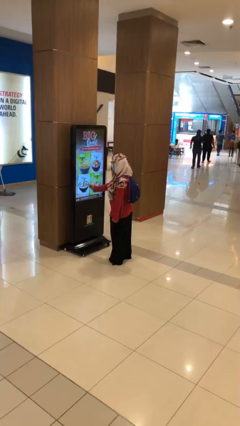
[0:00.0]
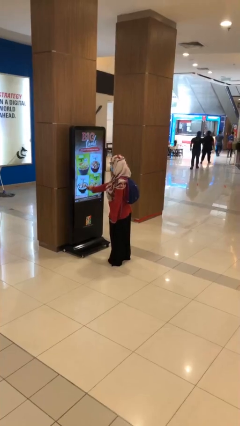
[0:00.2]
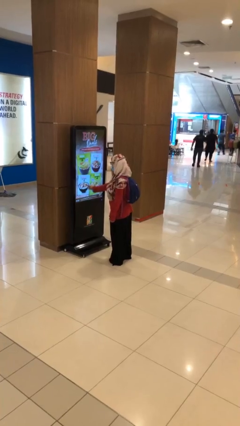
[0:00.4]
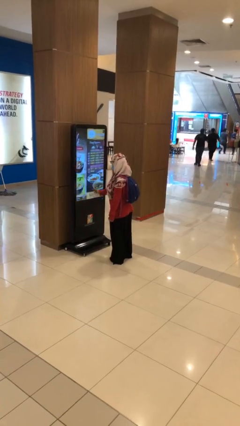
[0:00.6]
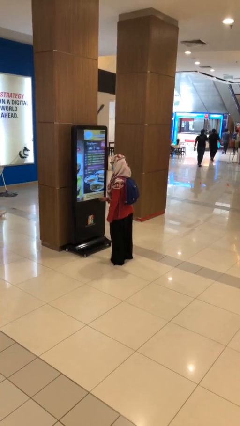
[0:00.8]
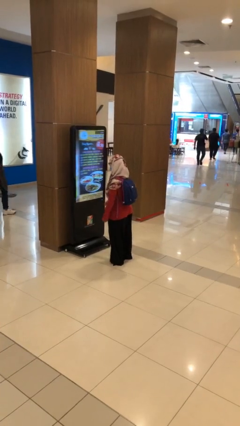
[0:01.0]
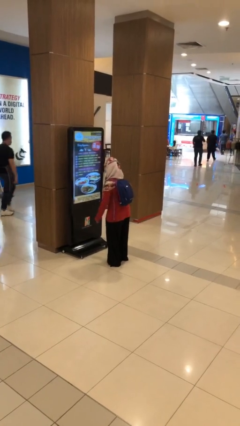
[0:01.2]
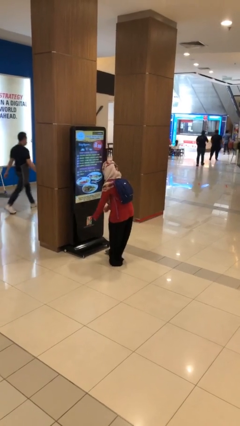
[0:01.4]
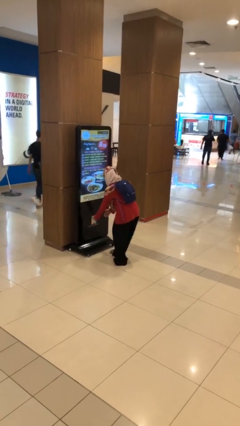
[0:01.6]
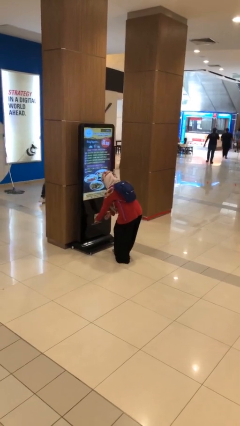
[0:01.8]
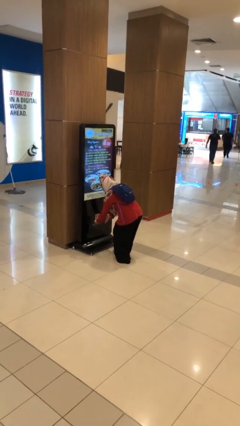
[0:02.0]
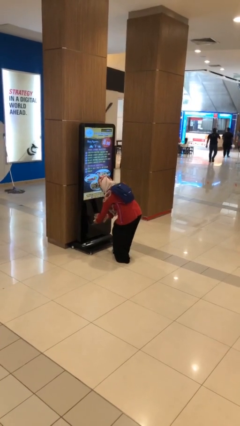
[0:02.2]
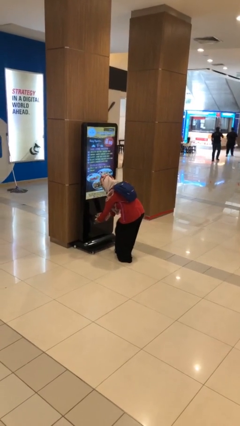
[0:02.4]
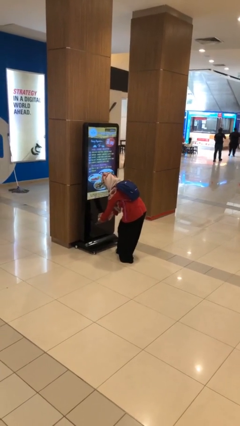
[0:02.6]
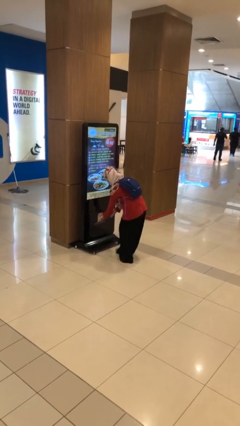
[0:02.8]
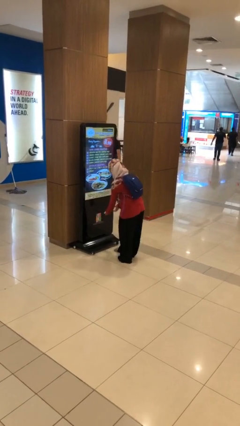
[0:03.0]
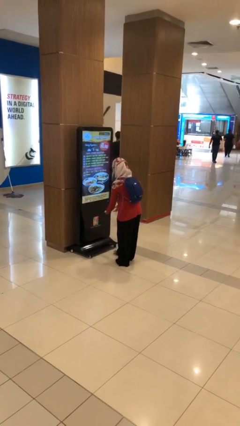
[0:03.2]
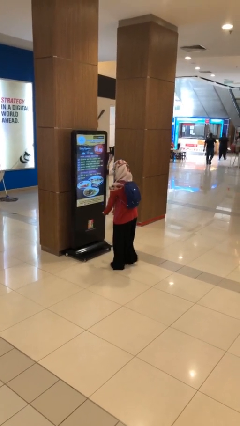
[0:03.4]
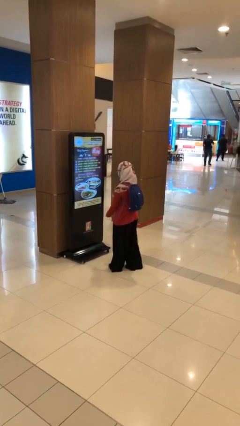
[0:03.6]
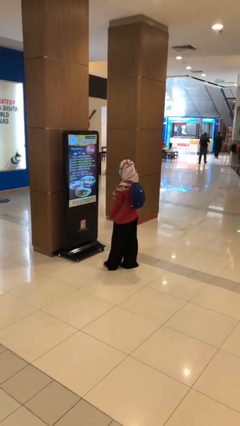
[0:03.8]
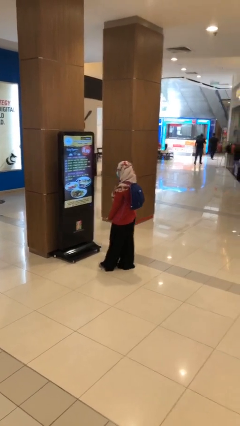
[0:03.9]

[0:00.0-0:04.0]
person purchases from machine

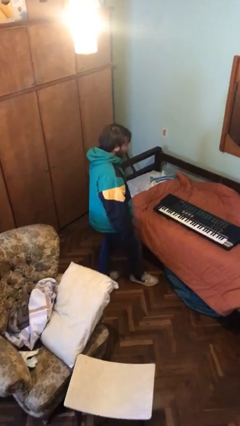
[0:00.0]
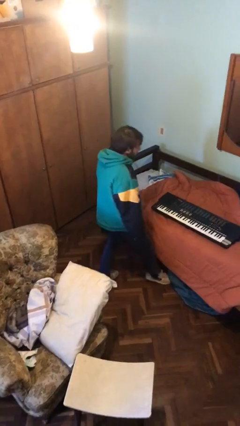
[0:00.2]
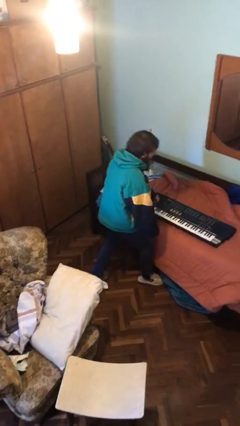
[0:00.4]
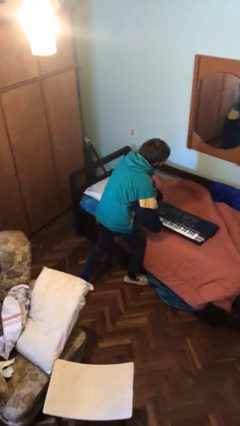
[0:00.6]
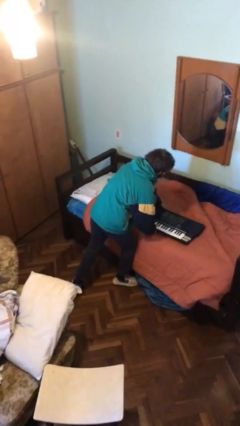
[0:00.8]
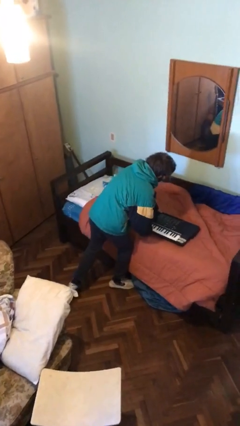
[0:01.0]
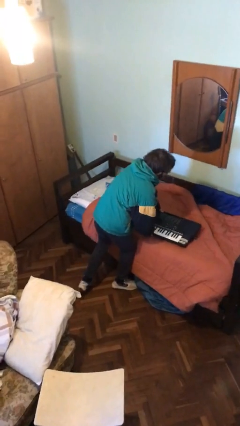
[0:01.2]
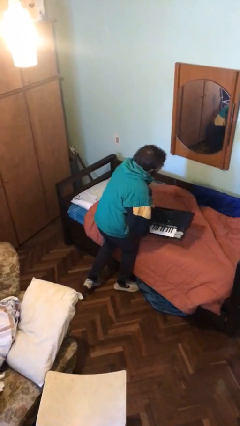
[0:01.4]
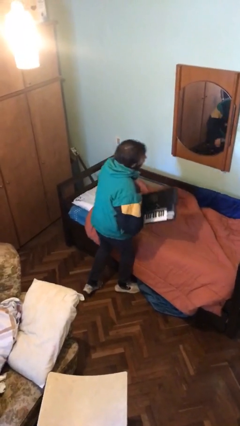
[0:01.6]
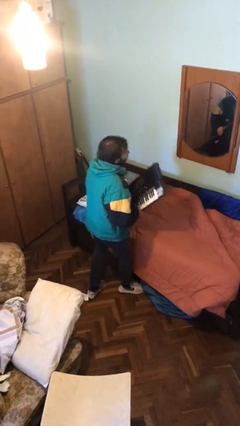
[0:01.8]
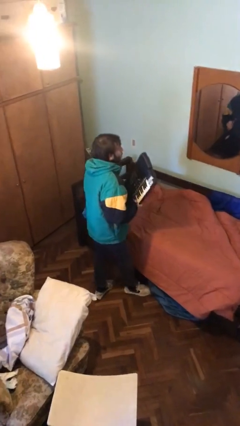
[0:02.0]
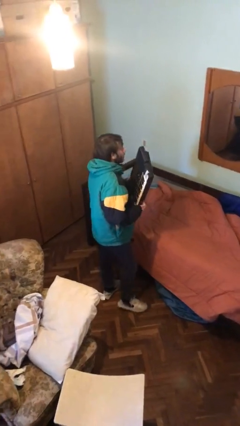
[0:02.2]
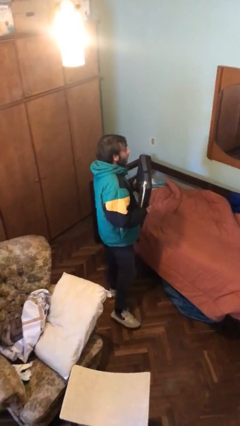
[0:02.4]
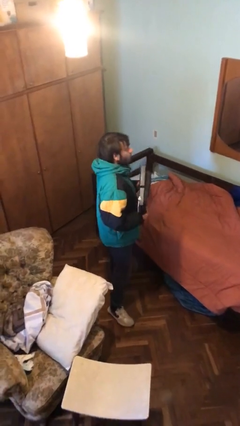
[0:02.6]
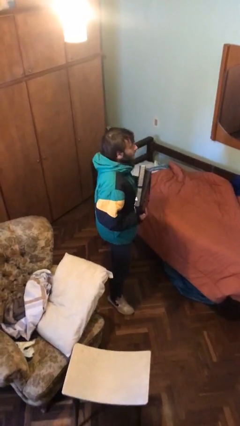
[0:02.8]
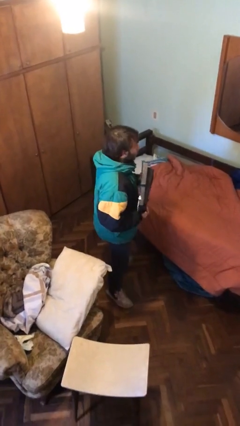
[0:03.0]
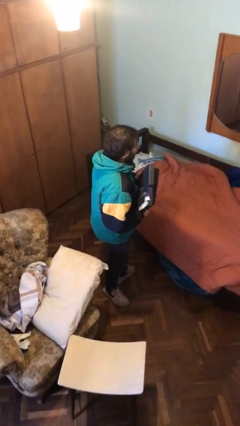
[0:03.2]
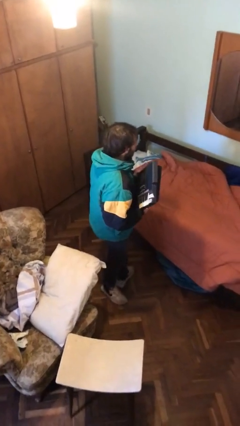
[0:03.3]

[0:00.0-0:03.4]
person picks up object from bed

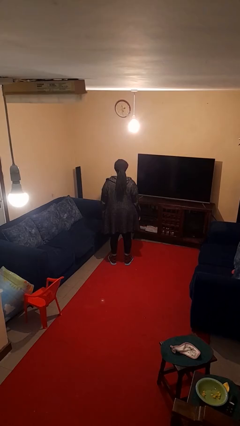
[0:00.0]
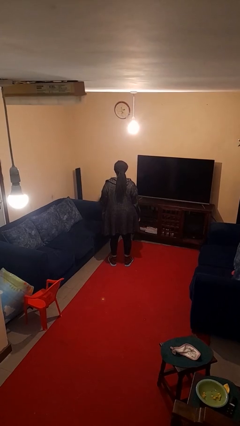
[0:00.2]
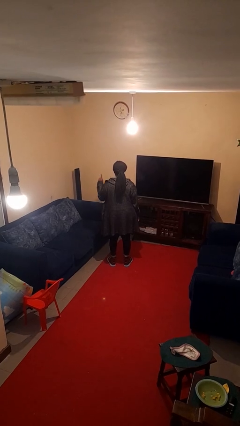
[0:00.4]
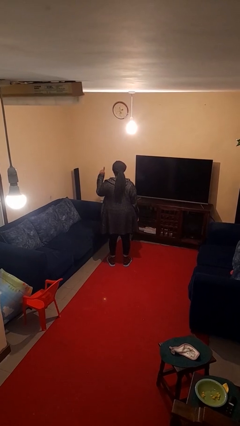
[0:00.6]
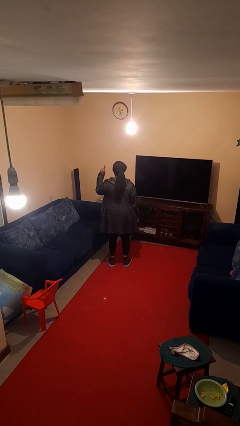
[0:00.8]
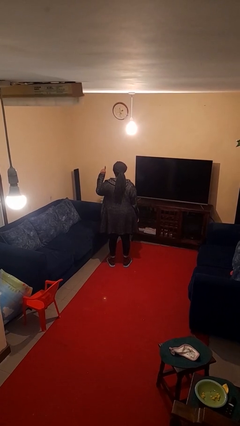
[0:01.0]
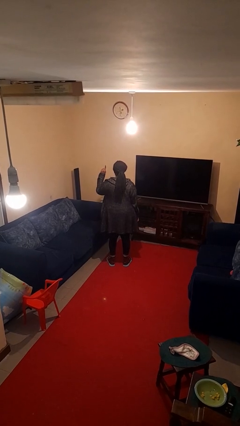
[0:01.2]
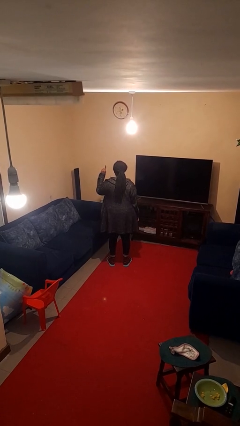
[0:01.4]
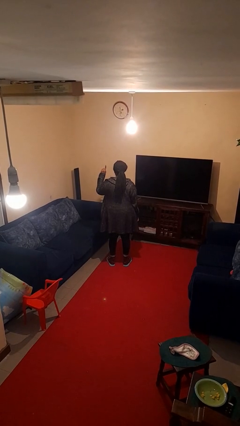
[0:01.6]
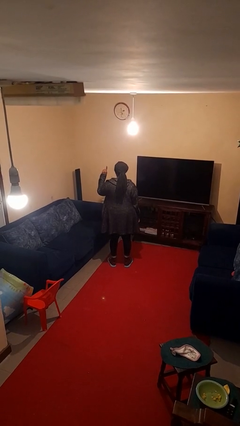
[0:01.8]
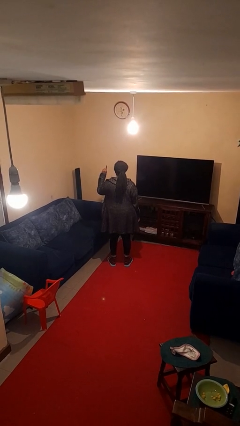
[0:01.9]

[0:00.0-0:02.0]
person gestures number one

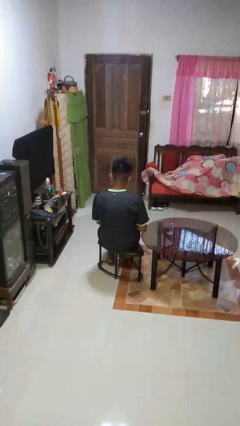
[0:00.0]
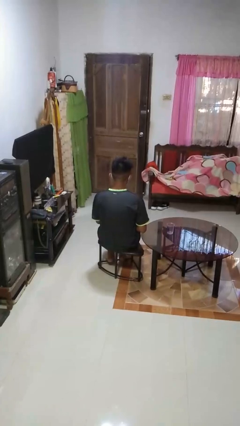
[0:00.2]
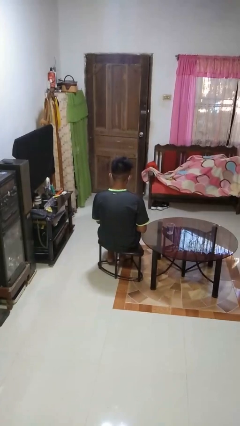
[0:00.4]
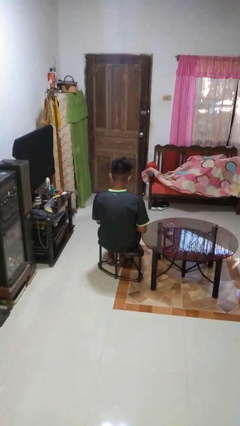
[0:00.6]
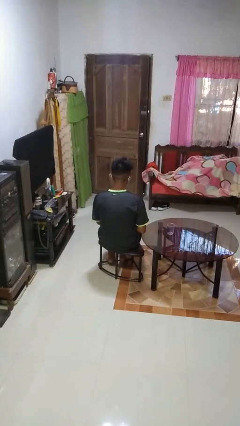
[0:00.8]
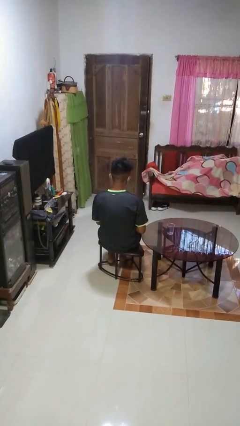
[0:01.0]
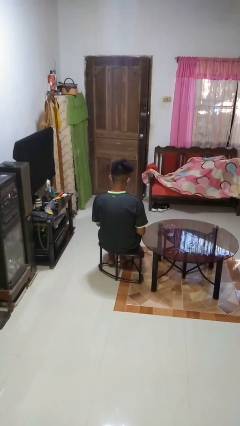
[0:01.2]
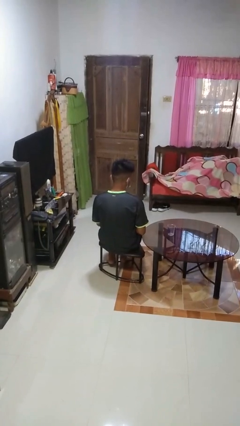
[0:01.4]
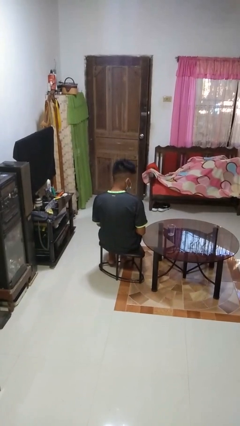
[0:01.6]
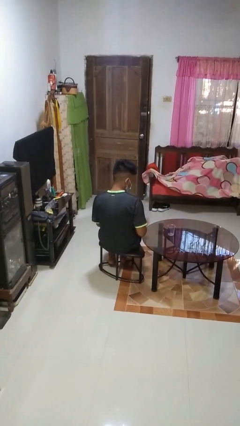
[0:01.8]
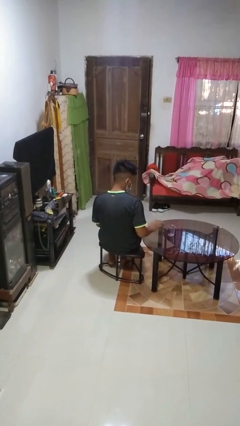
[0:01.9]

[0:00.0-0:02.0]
person opens beverage can

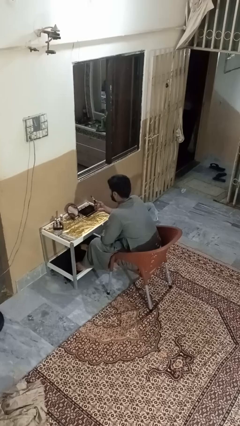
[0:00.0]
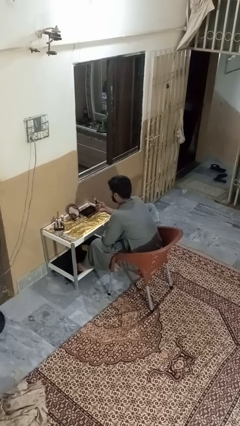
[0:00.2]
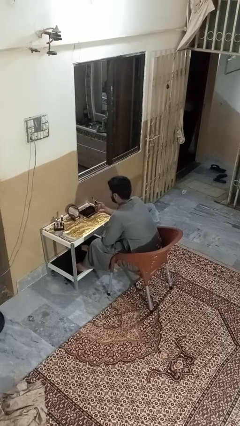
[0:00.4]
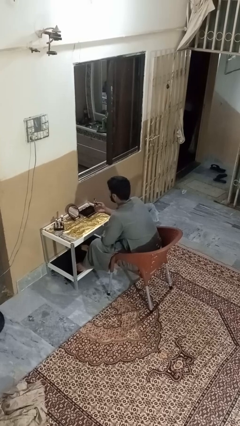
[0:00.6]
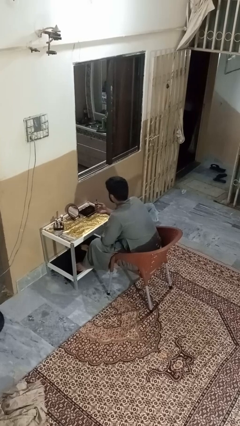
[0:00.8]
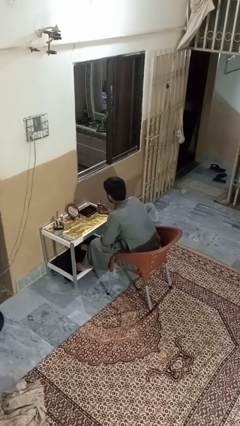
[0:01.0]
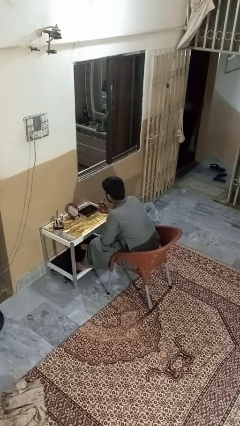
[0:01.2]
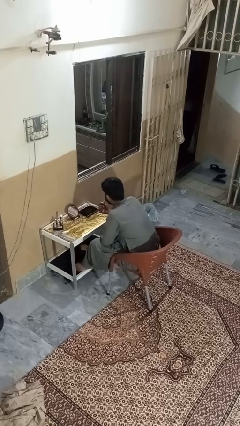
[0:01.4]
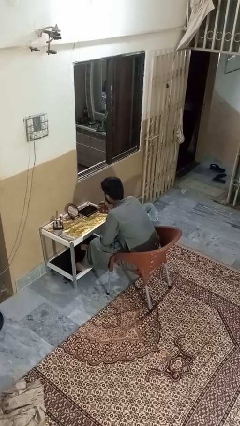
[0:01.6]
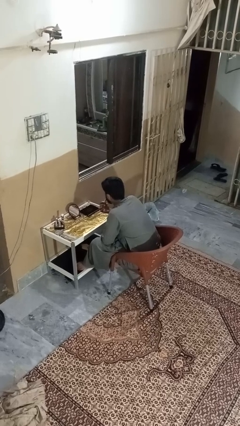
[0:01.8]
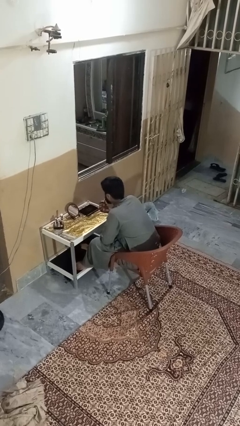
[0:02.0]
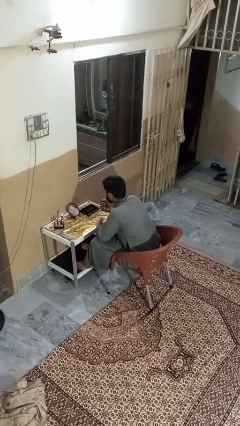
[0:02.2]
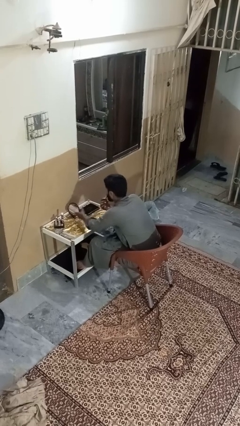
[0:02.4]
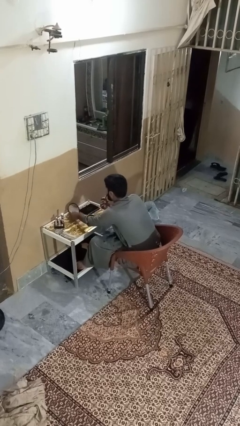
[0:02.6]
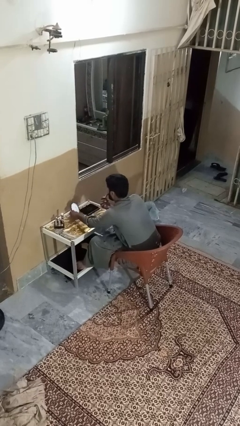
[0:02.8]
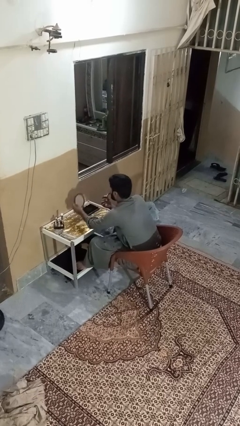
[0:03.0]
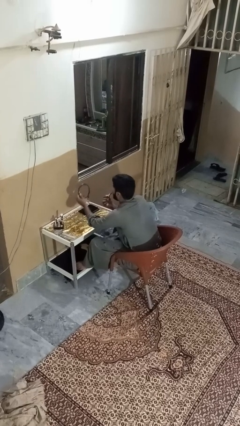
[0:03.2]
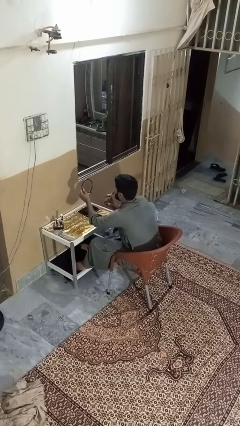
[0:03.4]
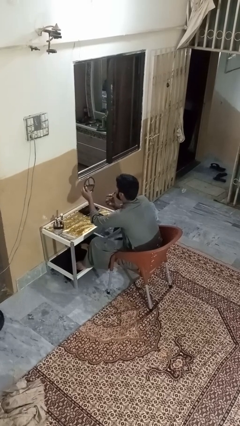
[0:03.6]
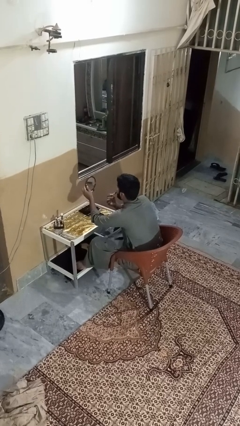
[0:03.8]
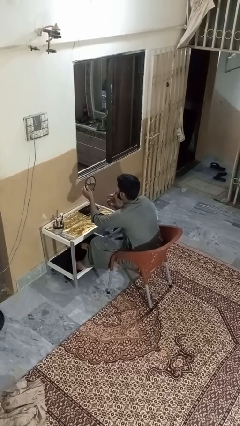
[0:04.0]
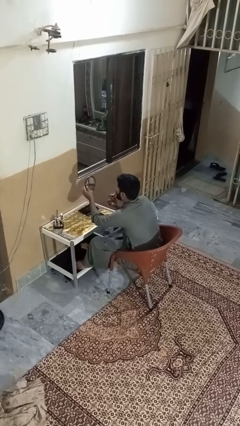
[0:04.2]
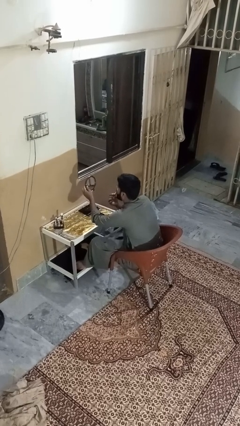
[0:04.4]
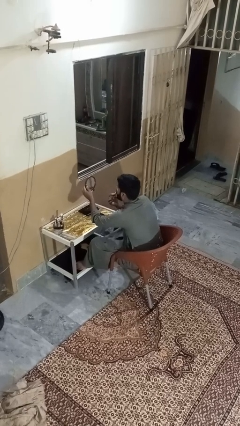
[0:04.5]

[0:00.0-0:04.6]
person applies lip makeup

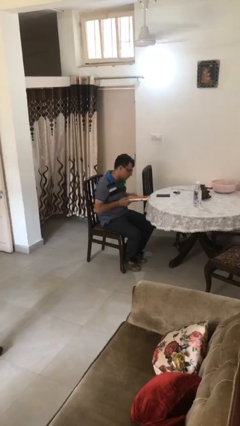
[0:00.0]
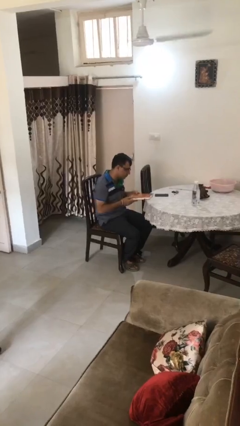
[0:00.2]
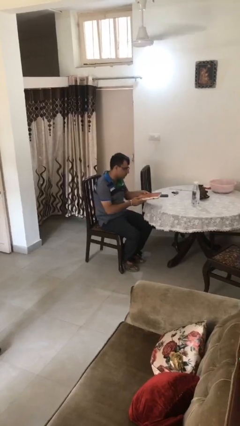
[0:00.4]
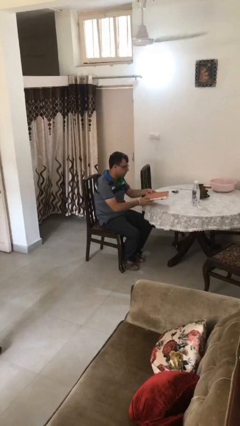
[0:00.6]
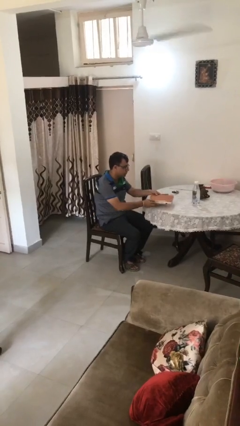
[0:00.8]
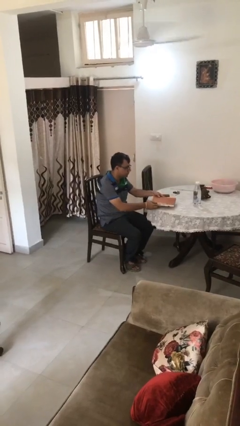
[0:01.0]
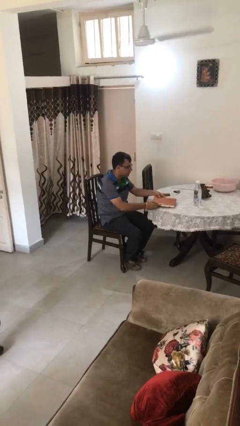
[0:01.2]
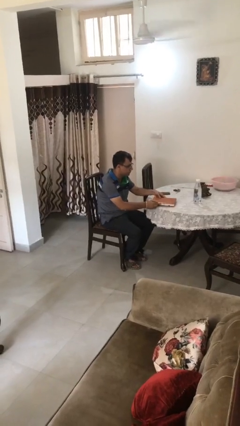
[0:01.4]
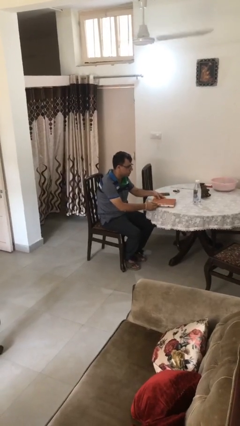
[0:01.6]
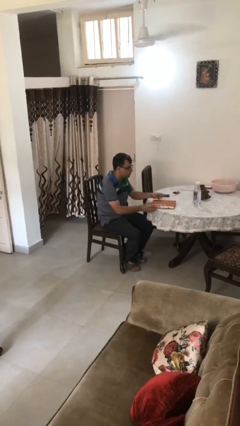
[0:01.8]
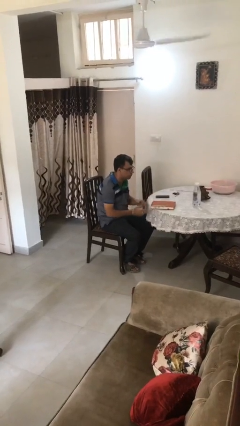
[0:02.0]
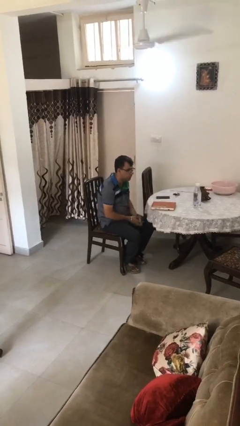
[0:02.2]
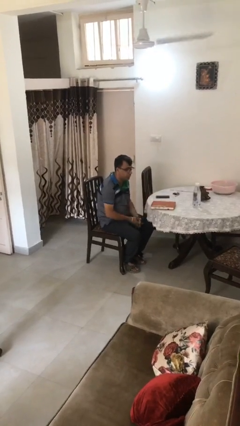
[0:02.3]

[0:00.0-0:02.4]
person puts down object on table
